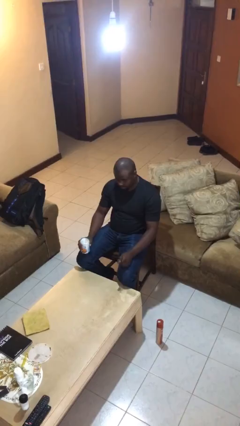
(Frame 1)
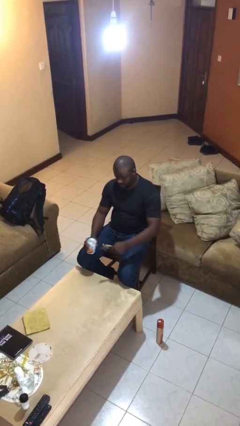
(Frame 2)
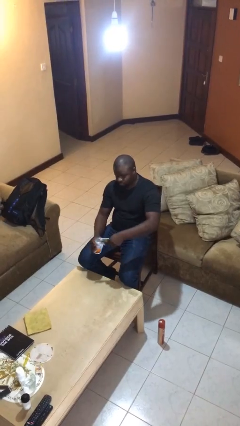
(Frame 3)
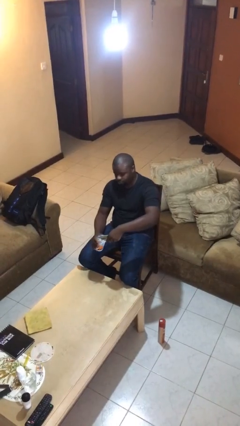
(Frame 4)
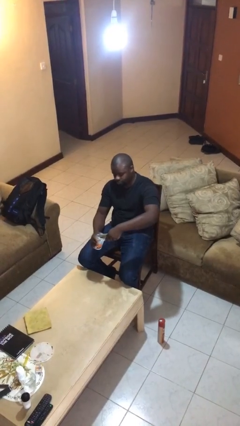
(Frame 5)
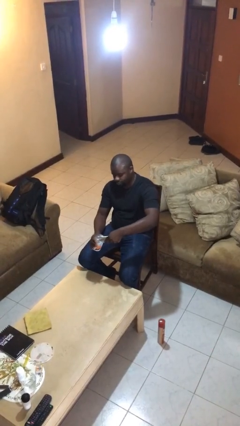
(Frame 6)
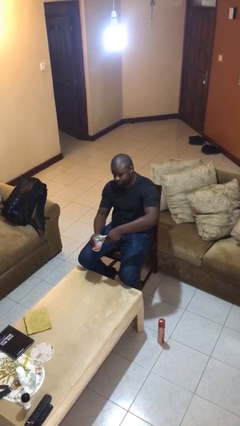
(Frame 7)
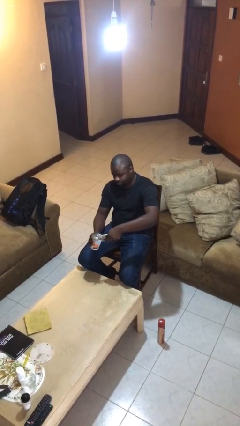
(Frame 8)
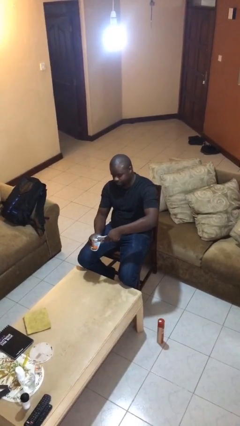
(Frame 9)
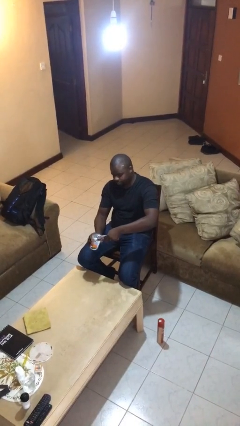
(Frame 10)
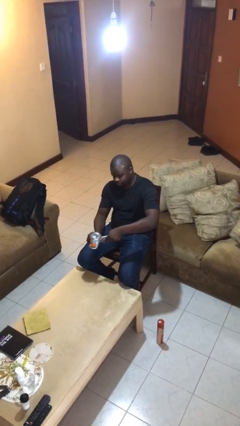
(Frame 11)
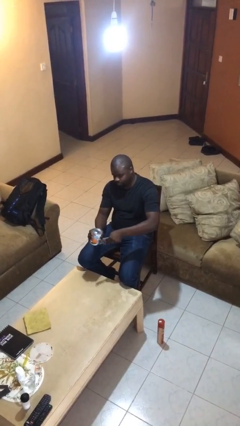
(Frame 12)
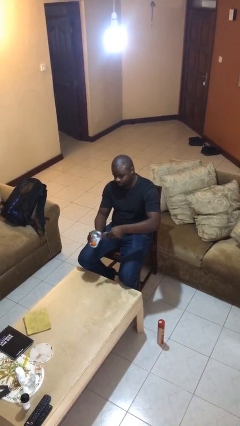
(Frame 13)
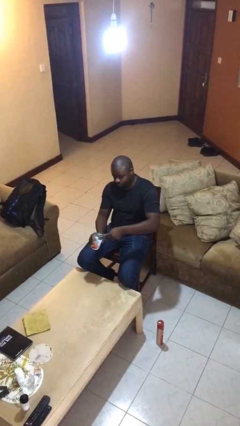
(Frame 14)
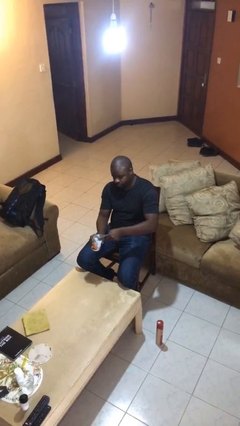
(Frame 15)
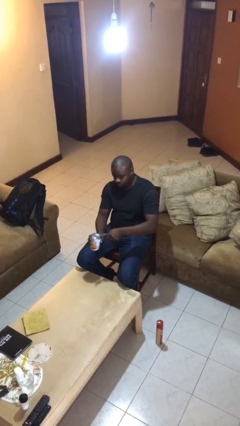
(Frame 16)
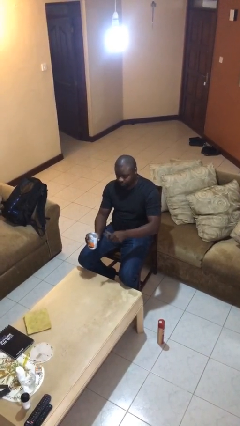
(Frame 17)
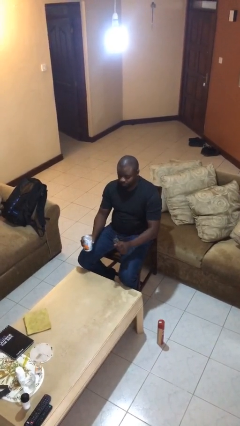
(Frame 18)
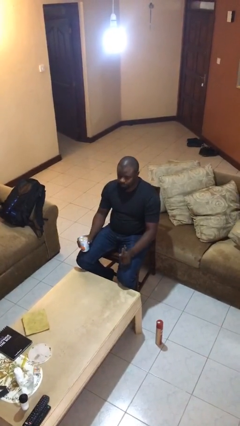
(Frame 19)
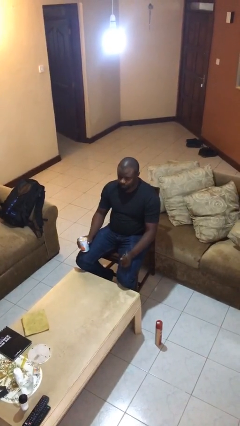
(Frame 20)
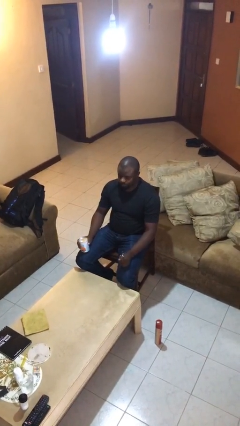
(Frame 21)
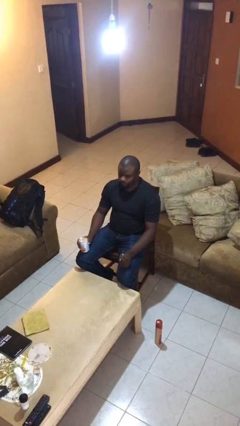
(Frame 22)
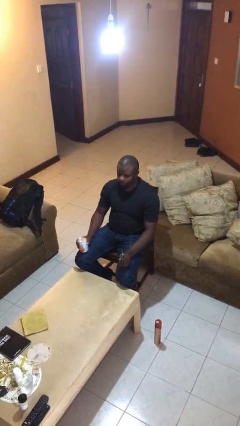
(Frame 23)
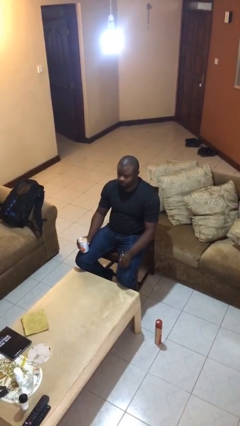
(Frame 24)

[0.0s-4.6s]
person opens can with can opener

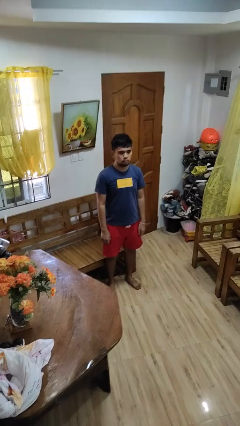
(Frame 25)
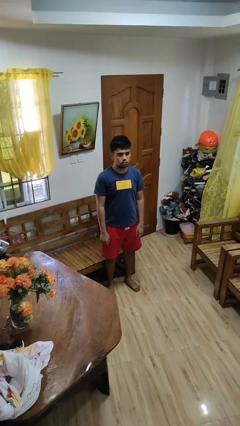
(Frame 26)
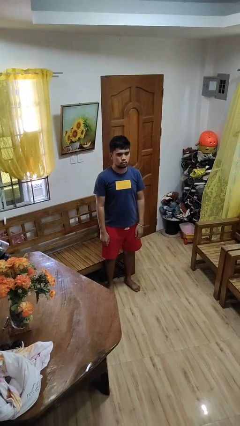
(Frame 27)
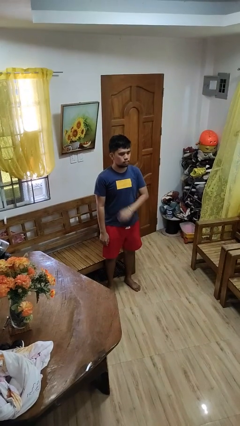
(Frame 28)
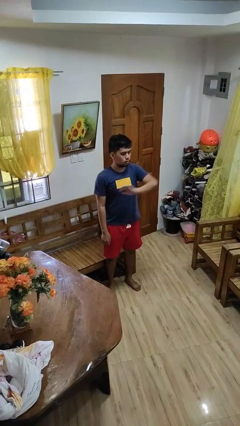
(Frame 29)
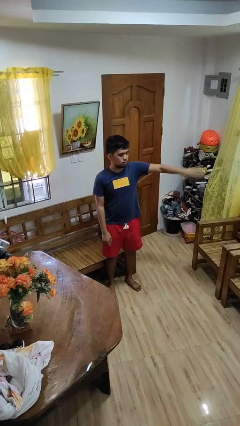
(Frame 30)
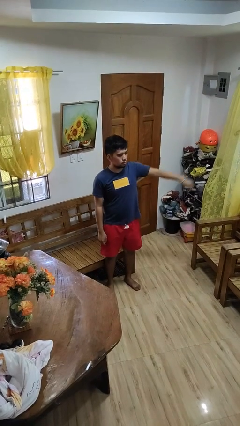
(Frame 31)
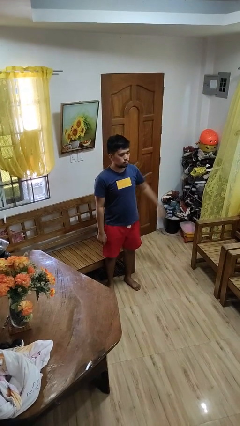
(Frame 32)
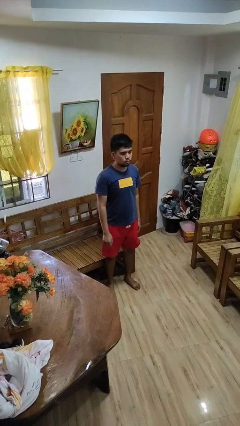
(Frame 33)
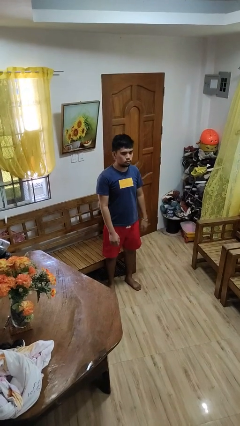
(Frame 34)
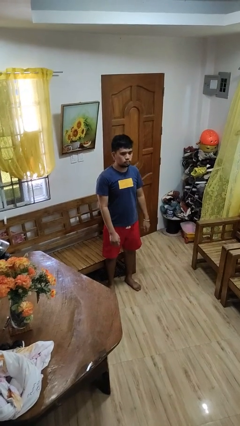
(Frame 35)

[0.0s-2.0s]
person gestures swipe left

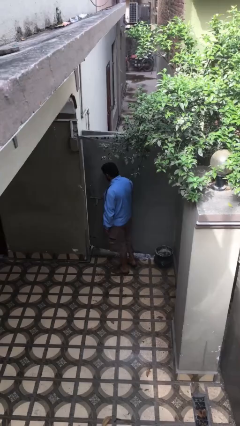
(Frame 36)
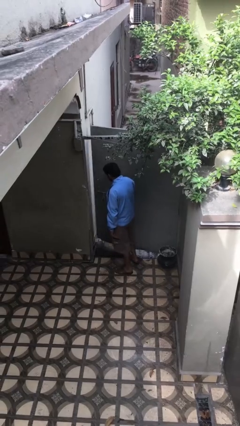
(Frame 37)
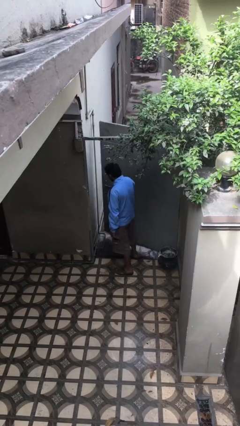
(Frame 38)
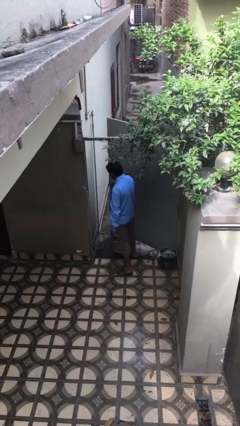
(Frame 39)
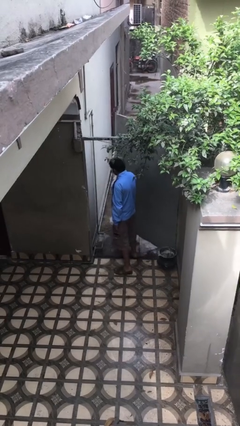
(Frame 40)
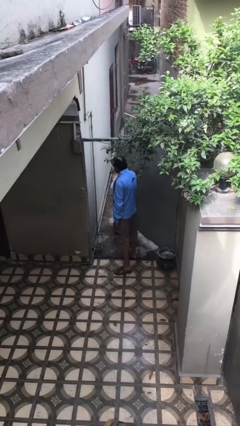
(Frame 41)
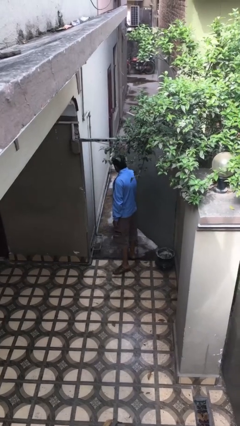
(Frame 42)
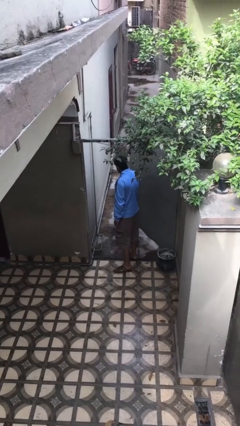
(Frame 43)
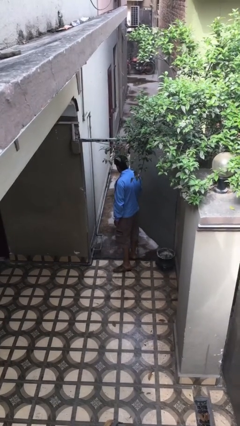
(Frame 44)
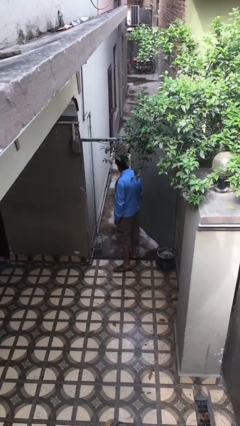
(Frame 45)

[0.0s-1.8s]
person opens facility door

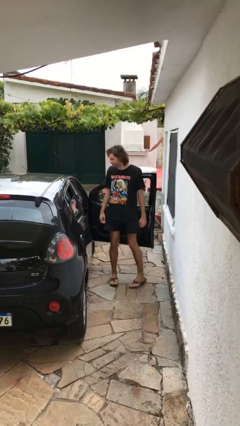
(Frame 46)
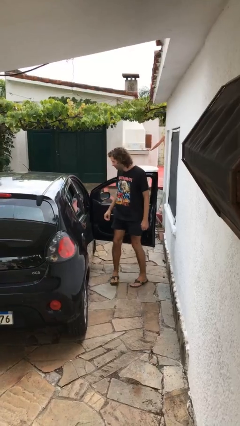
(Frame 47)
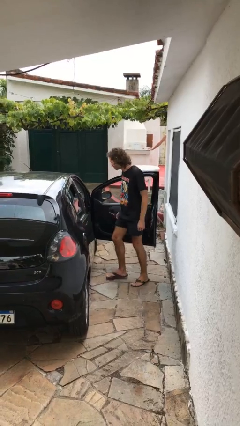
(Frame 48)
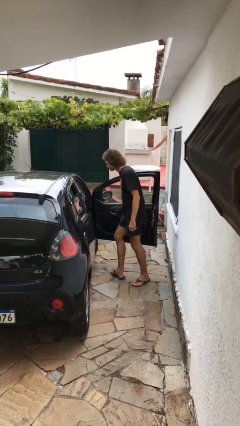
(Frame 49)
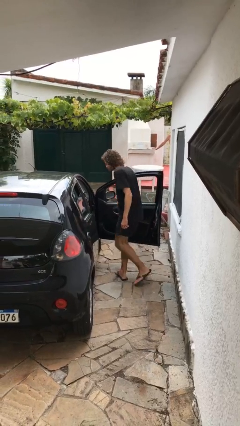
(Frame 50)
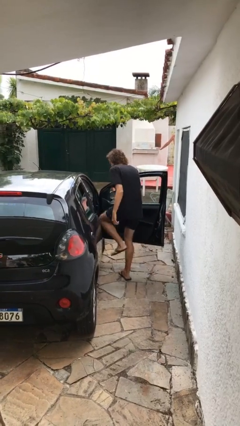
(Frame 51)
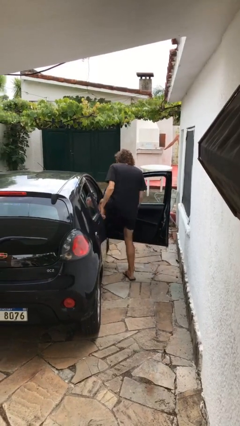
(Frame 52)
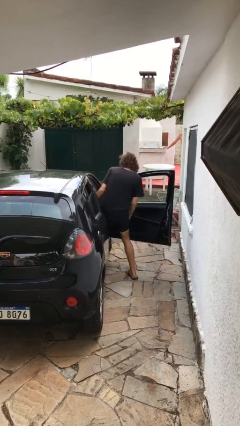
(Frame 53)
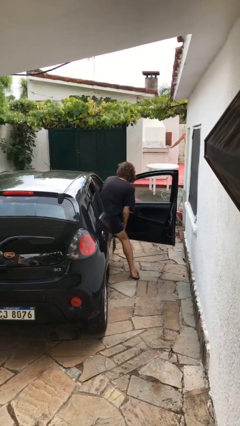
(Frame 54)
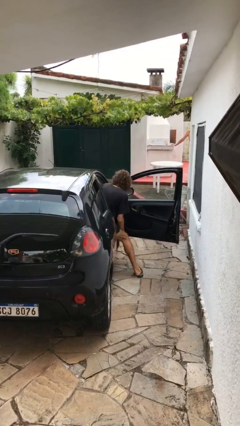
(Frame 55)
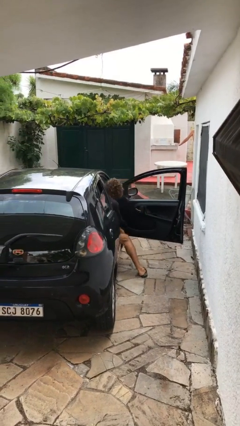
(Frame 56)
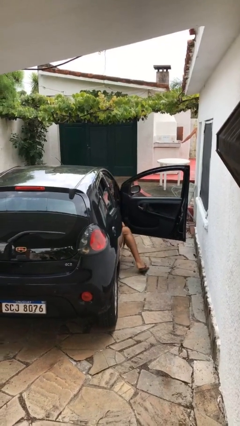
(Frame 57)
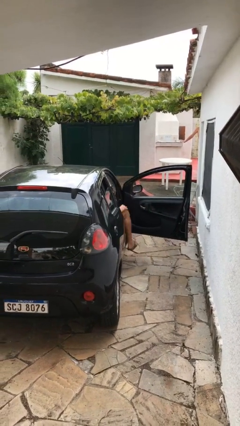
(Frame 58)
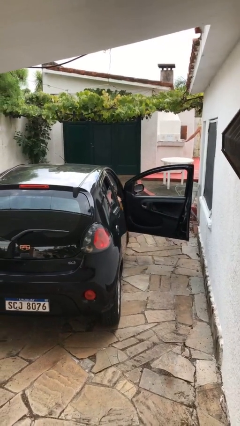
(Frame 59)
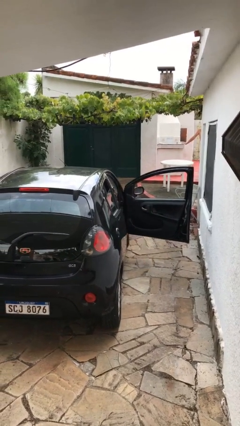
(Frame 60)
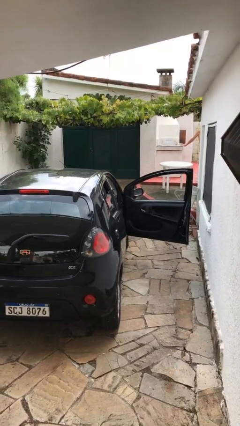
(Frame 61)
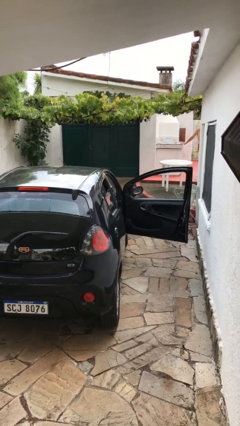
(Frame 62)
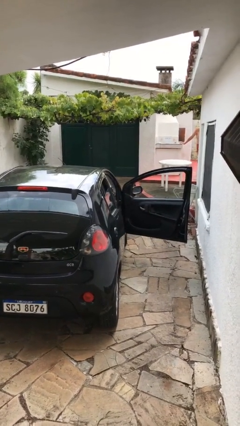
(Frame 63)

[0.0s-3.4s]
person enters car

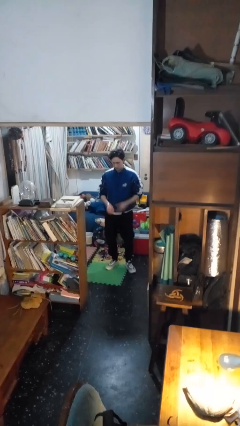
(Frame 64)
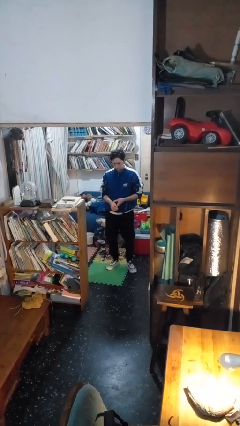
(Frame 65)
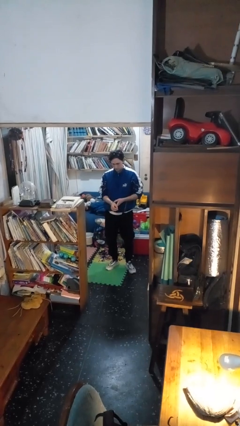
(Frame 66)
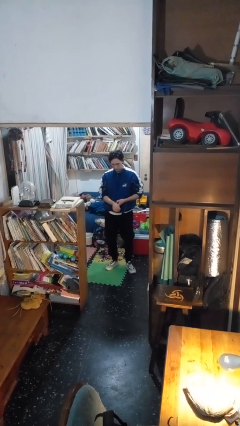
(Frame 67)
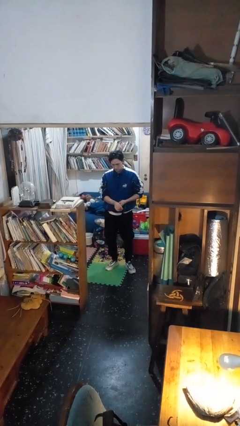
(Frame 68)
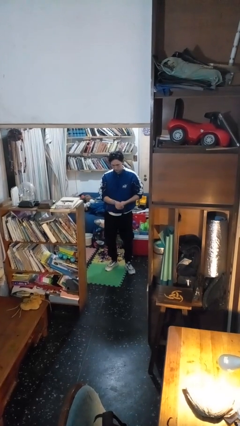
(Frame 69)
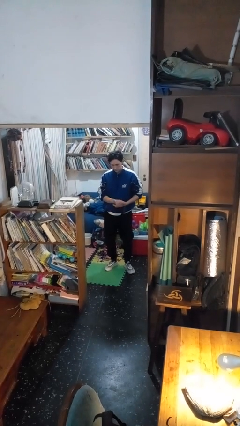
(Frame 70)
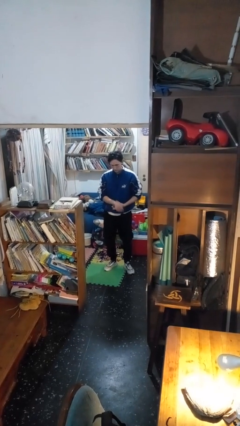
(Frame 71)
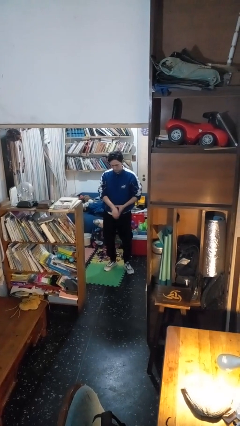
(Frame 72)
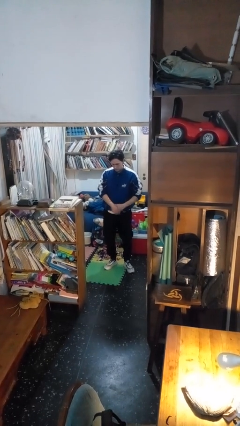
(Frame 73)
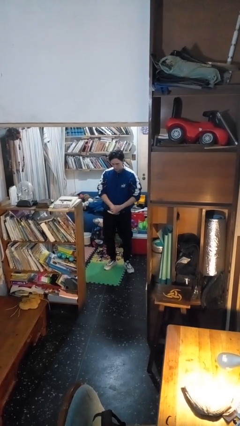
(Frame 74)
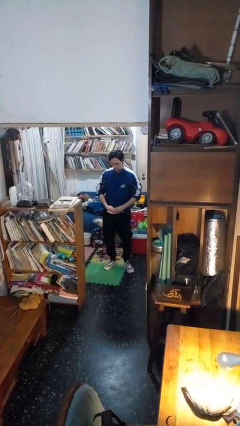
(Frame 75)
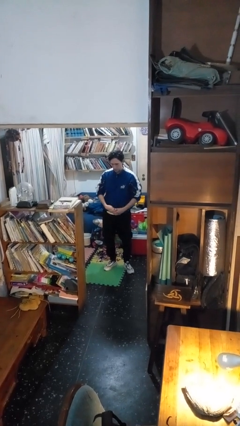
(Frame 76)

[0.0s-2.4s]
person takes off wristwatch

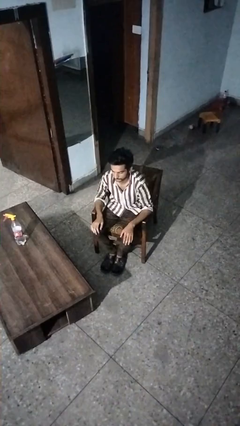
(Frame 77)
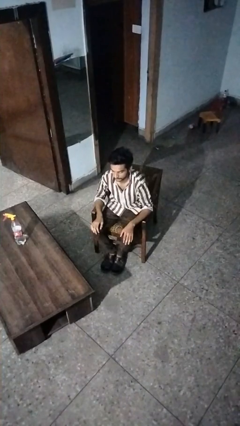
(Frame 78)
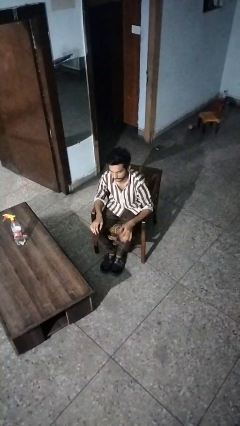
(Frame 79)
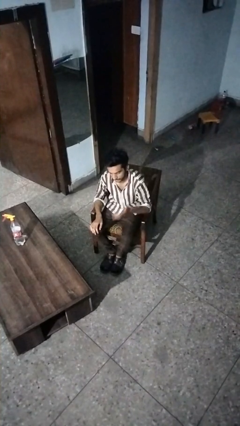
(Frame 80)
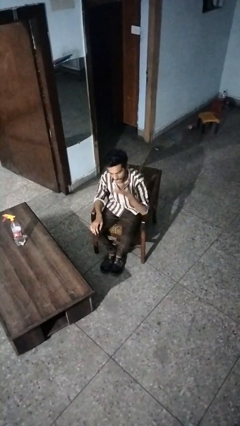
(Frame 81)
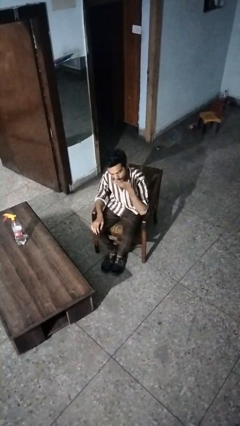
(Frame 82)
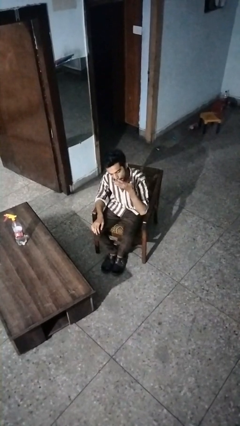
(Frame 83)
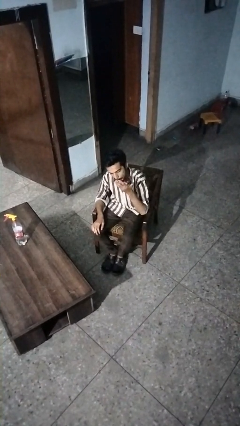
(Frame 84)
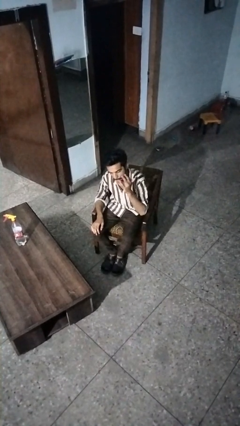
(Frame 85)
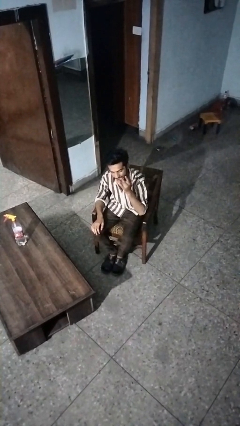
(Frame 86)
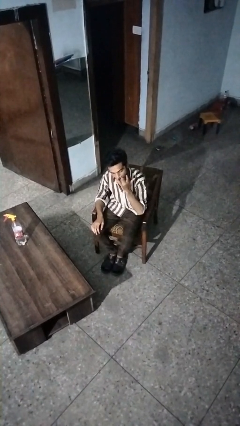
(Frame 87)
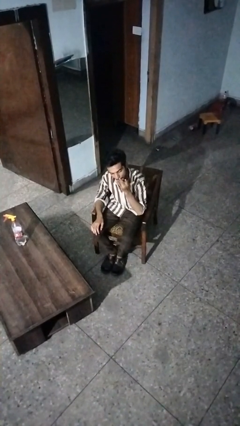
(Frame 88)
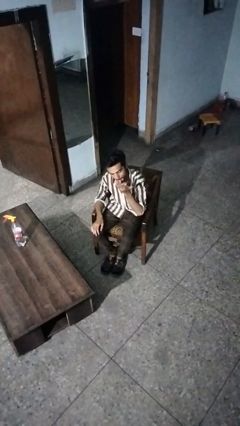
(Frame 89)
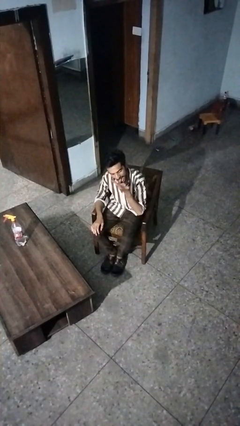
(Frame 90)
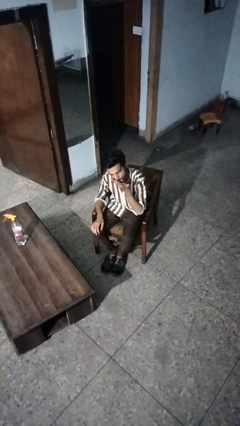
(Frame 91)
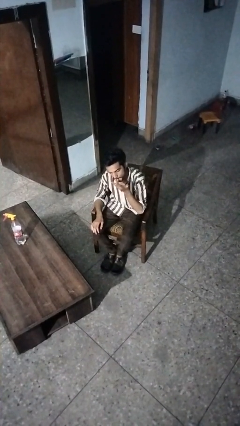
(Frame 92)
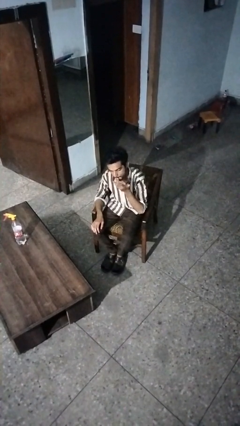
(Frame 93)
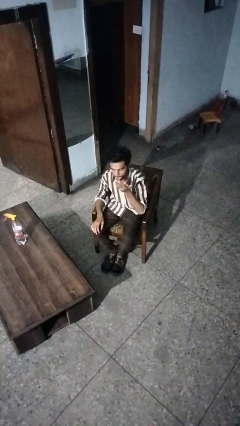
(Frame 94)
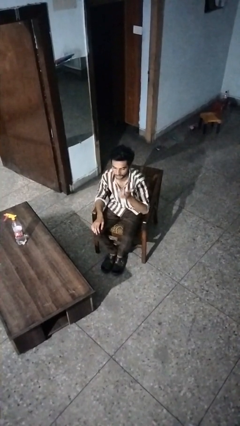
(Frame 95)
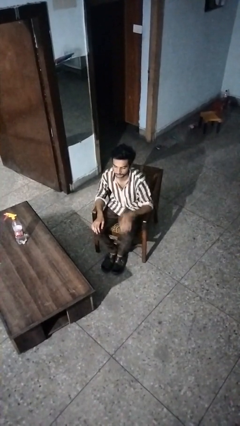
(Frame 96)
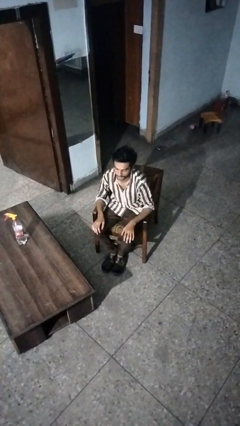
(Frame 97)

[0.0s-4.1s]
person licks fingers
